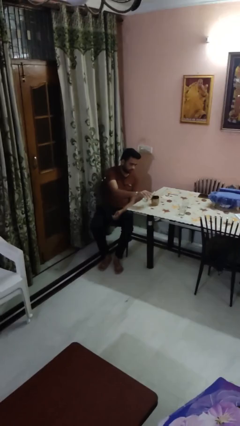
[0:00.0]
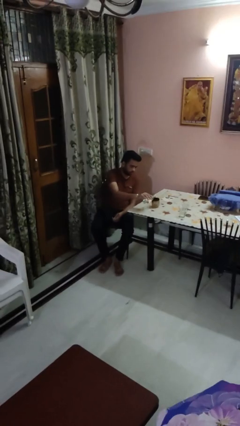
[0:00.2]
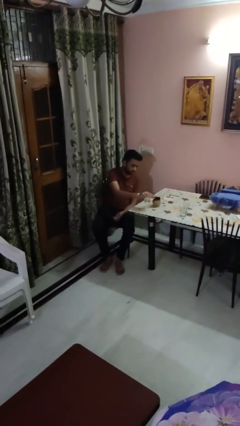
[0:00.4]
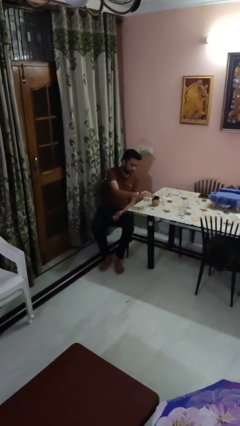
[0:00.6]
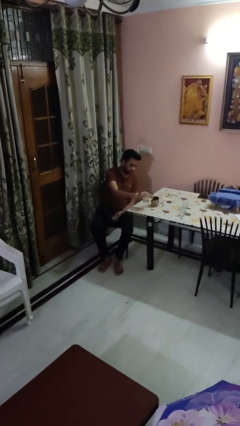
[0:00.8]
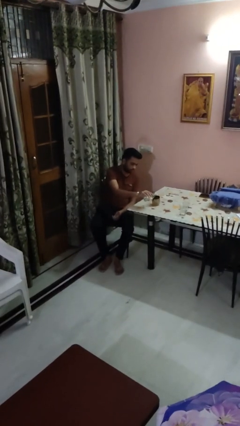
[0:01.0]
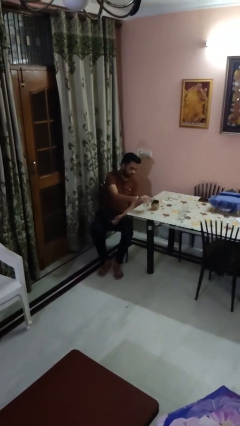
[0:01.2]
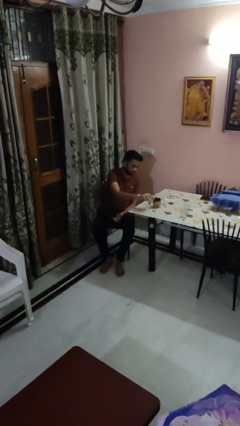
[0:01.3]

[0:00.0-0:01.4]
person pours liquid into cup

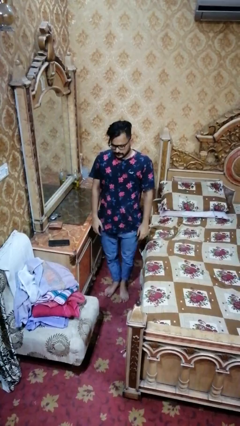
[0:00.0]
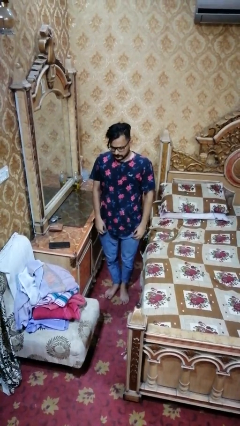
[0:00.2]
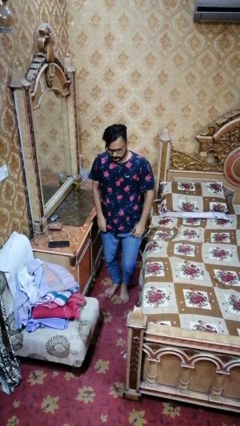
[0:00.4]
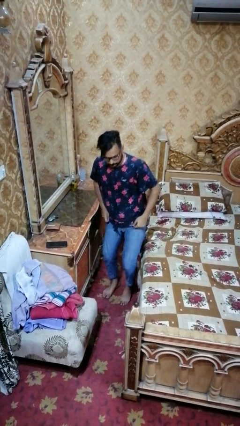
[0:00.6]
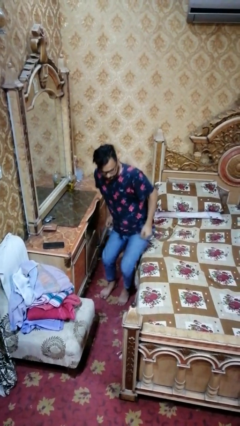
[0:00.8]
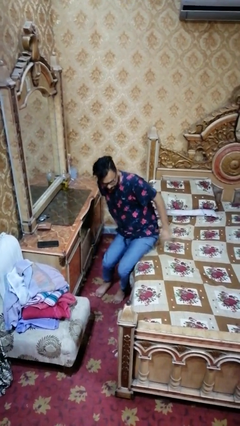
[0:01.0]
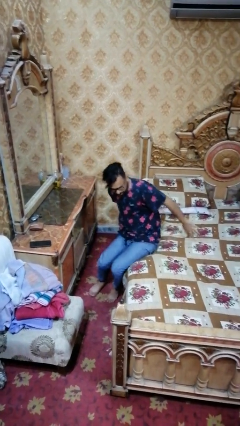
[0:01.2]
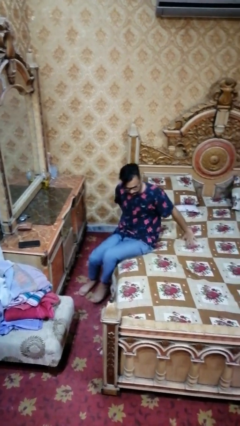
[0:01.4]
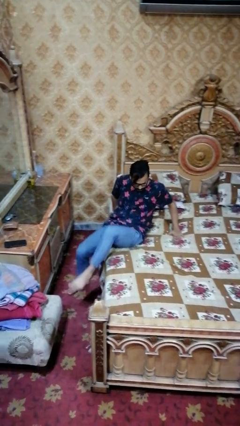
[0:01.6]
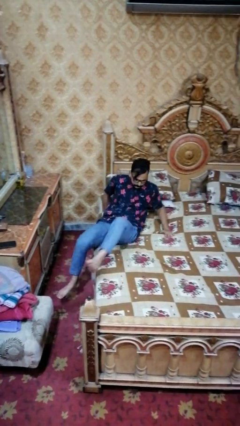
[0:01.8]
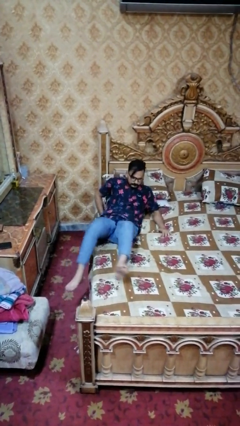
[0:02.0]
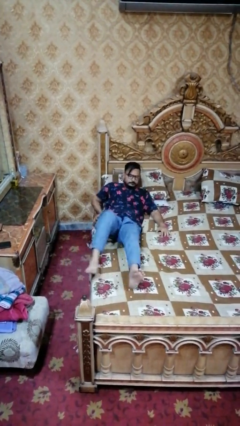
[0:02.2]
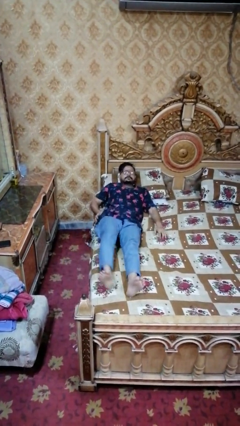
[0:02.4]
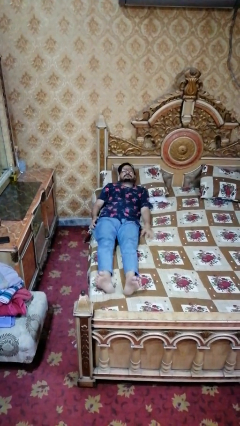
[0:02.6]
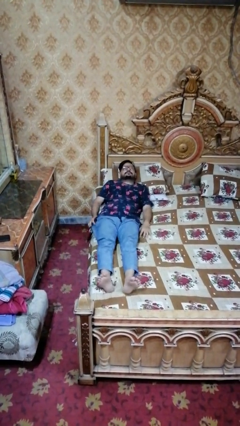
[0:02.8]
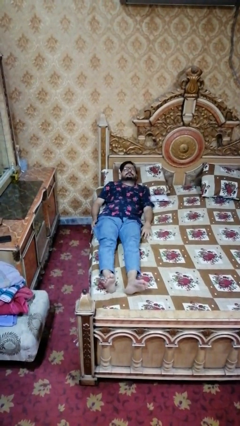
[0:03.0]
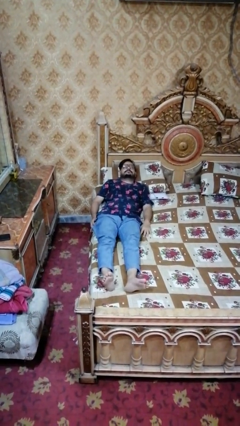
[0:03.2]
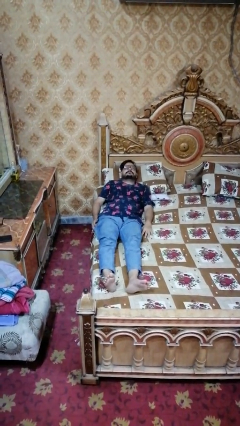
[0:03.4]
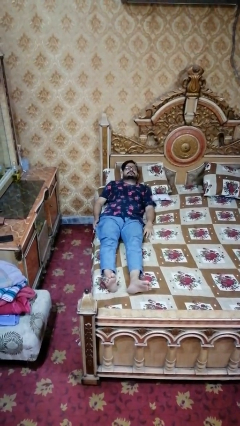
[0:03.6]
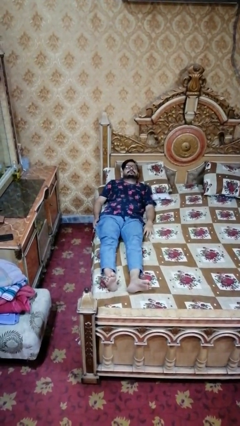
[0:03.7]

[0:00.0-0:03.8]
person lies down on bed

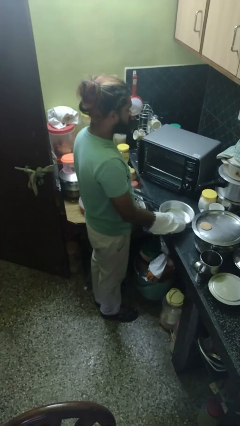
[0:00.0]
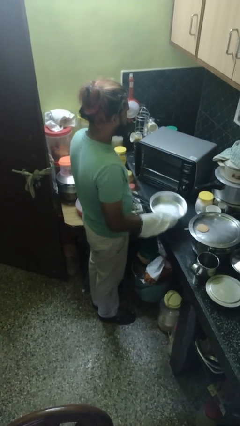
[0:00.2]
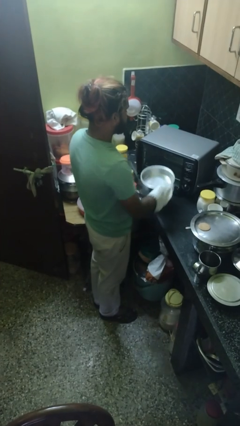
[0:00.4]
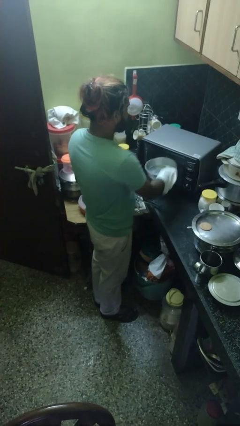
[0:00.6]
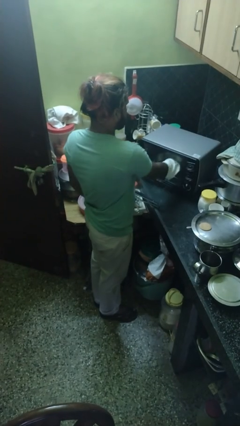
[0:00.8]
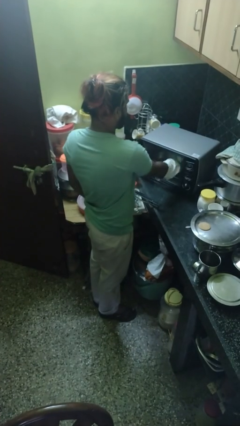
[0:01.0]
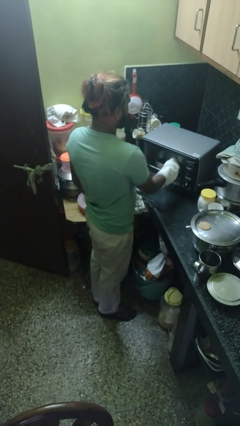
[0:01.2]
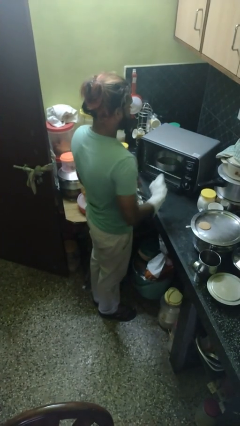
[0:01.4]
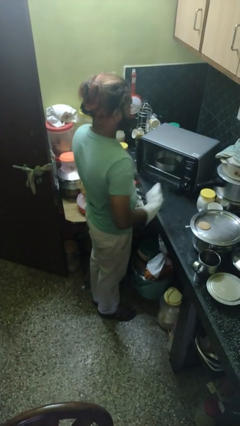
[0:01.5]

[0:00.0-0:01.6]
person puts object into oven

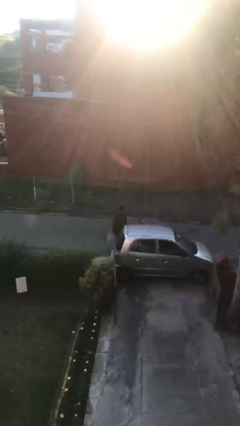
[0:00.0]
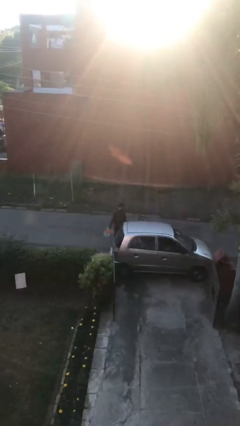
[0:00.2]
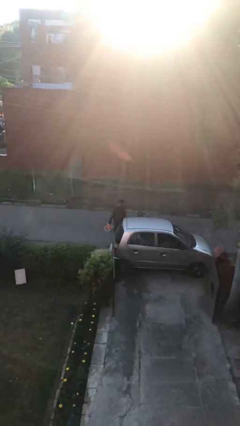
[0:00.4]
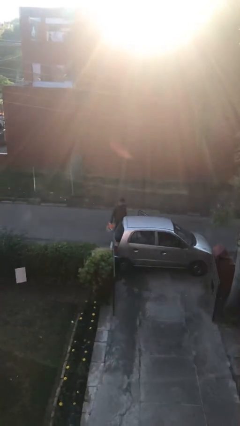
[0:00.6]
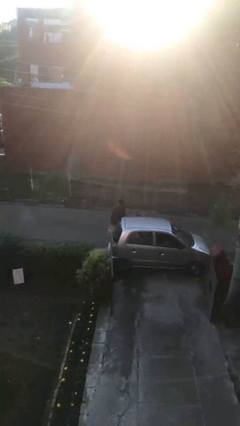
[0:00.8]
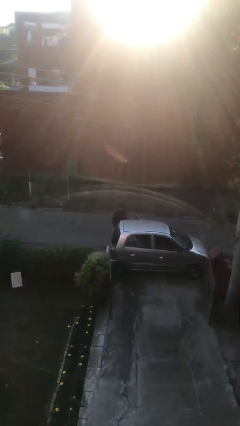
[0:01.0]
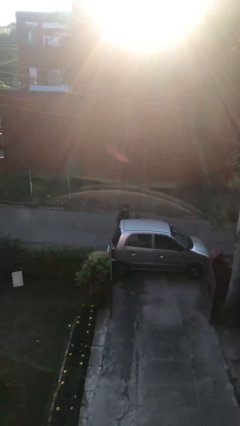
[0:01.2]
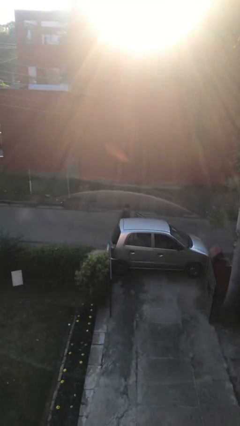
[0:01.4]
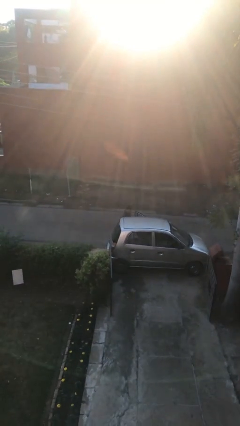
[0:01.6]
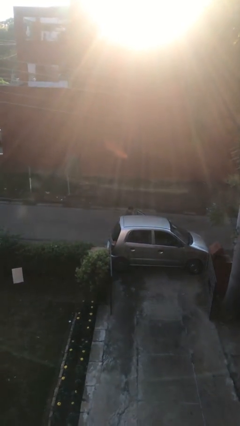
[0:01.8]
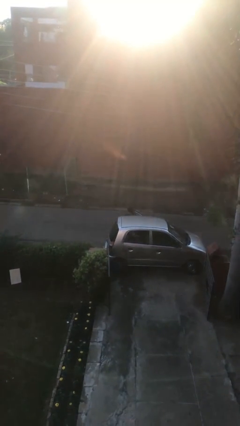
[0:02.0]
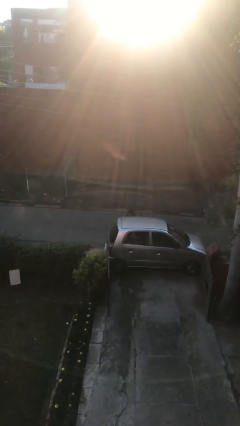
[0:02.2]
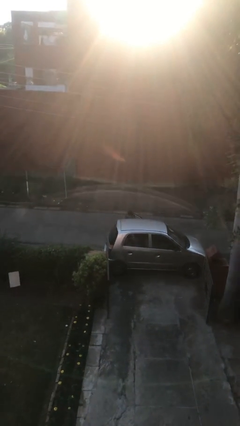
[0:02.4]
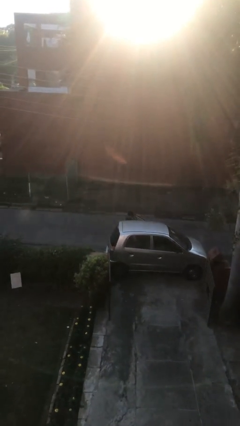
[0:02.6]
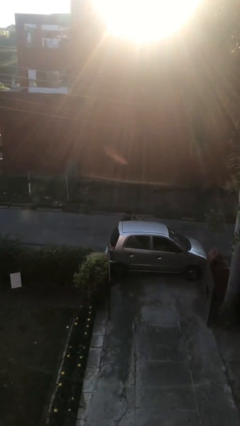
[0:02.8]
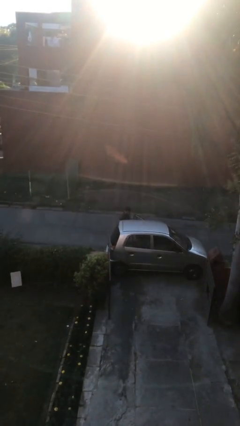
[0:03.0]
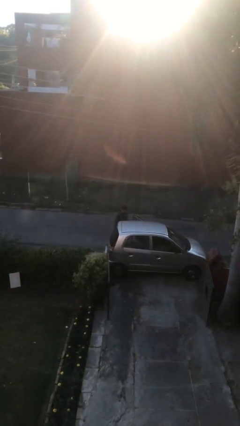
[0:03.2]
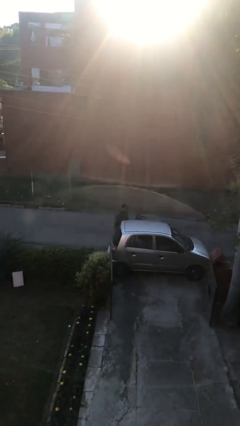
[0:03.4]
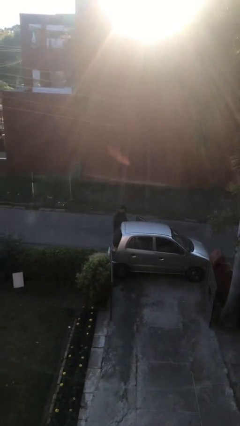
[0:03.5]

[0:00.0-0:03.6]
person loads car

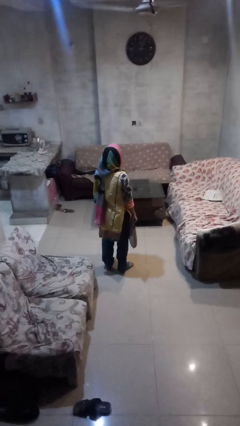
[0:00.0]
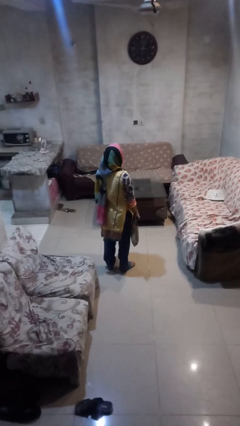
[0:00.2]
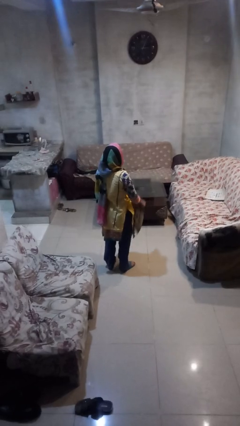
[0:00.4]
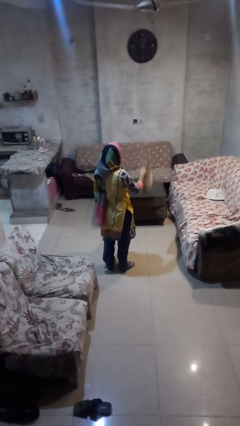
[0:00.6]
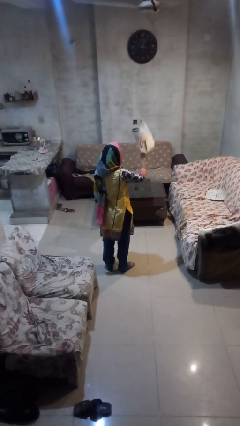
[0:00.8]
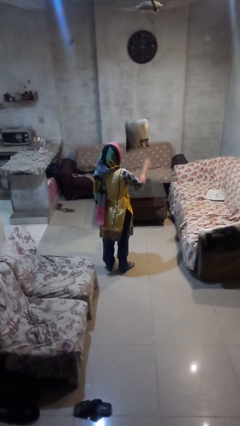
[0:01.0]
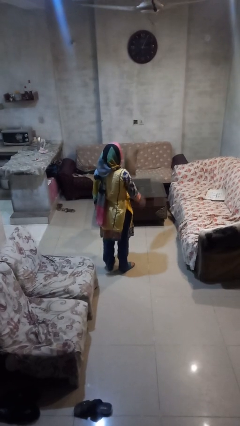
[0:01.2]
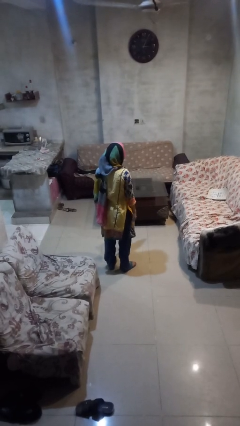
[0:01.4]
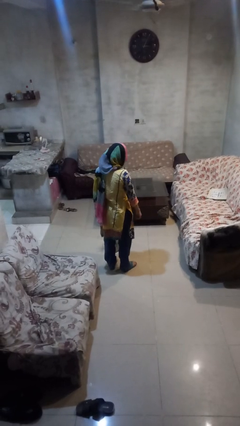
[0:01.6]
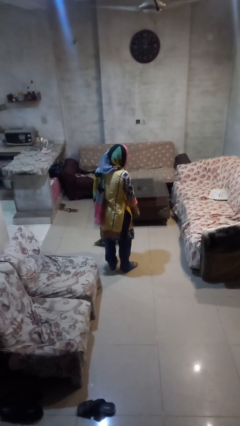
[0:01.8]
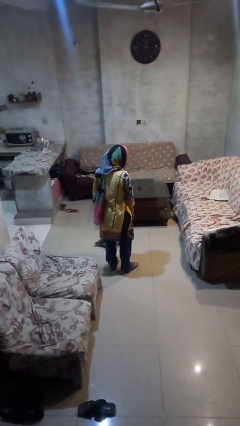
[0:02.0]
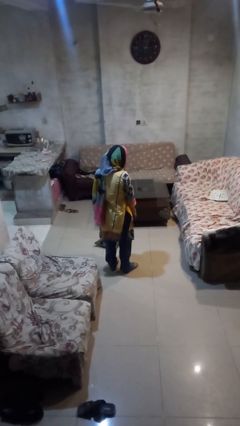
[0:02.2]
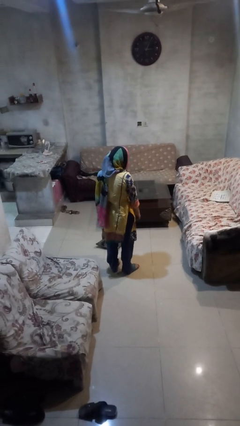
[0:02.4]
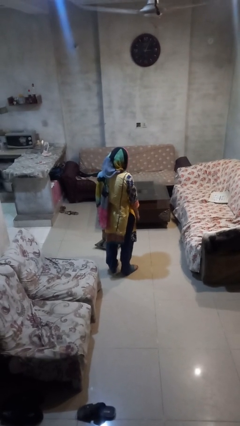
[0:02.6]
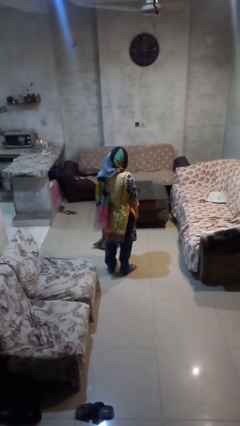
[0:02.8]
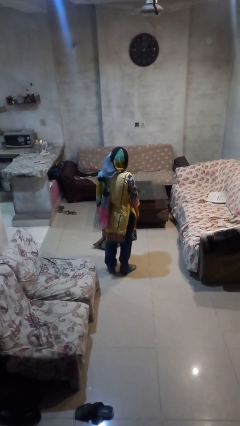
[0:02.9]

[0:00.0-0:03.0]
person throws object into air

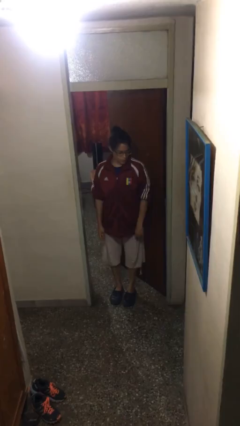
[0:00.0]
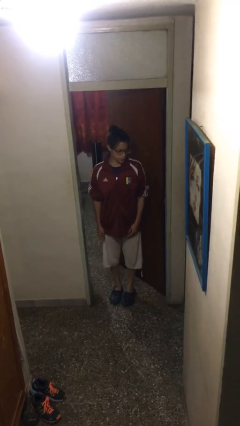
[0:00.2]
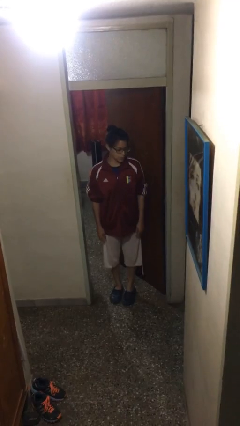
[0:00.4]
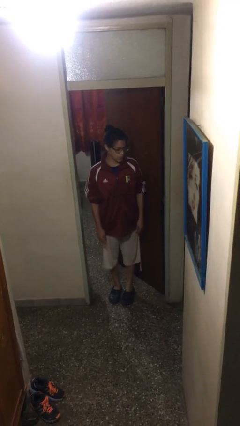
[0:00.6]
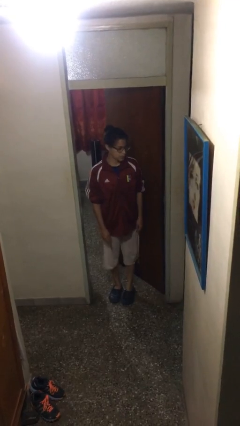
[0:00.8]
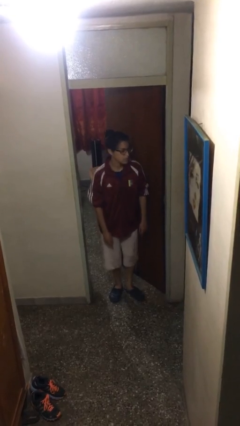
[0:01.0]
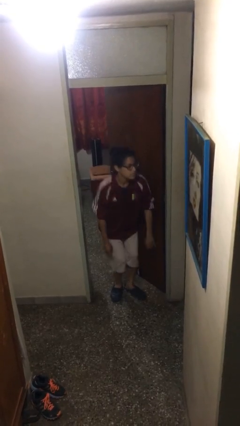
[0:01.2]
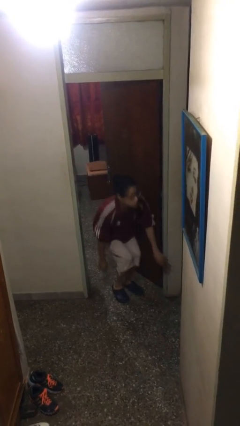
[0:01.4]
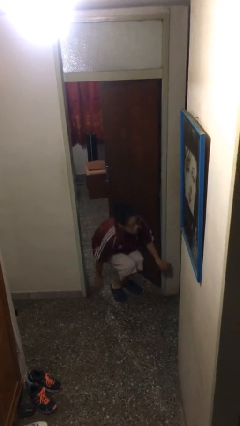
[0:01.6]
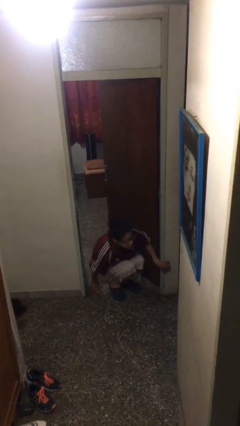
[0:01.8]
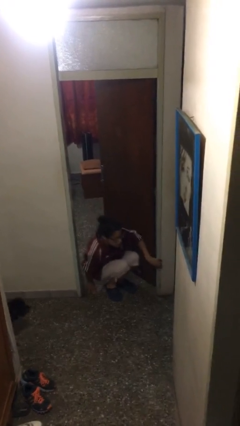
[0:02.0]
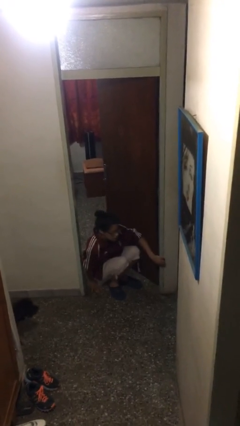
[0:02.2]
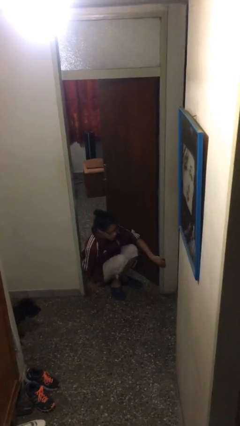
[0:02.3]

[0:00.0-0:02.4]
person sits down

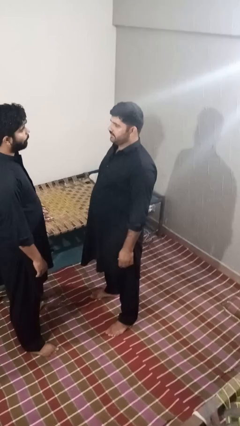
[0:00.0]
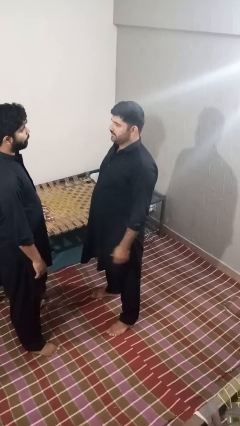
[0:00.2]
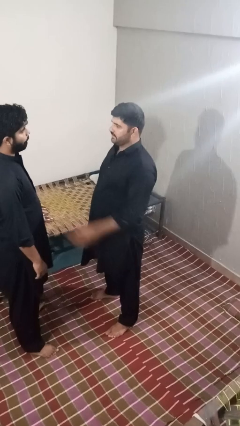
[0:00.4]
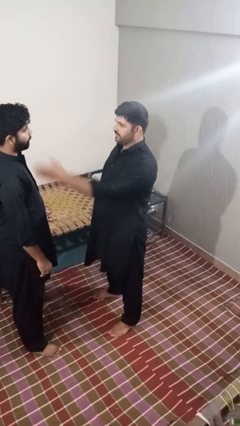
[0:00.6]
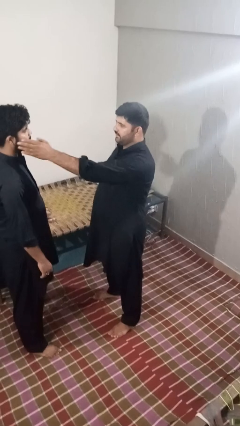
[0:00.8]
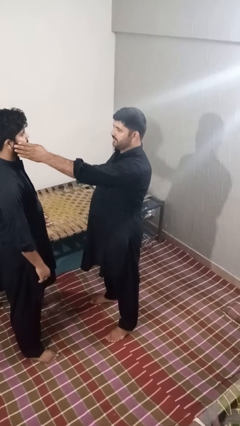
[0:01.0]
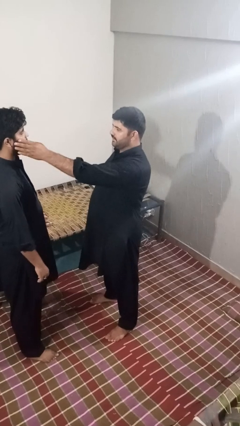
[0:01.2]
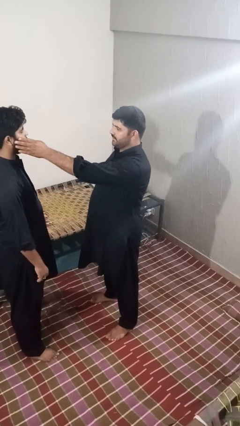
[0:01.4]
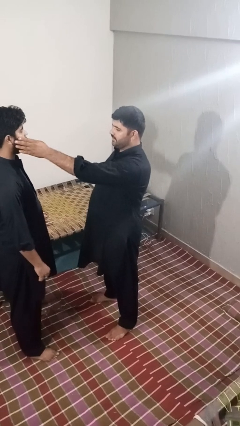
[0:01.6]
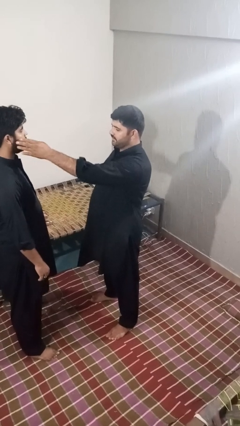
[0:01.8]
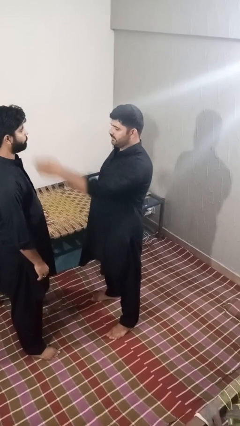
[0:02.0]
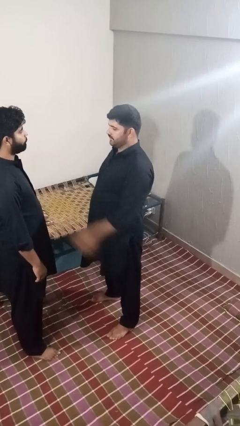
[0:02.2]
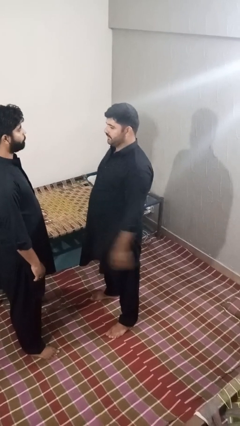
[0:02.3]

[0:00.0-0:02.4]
person touches face of person
